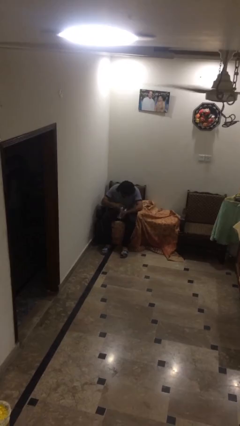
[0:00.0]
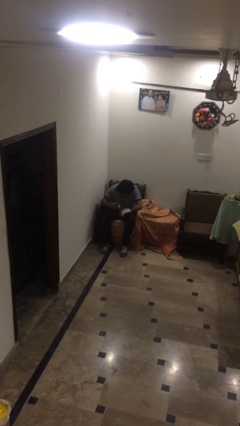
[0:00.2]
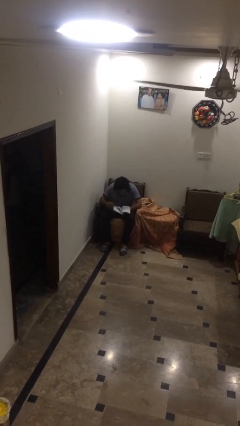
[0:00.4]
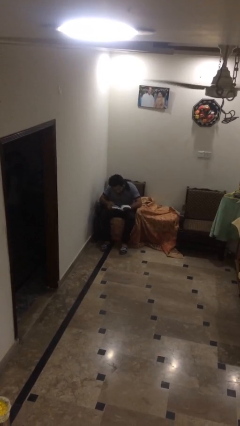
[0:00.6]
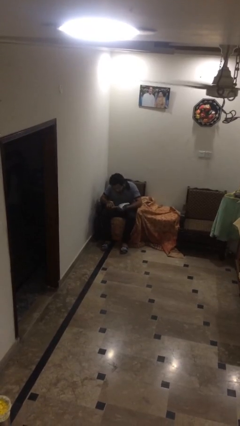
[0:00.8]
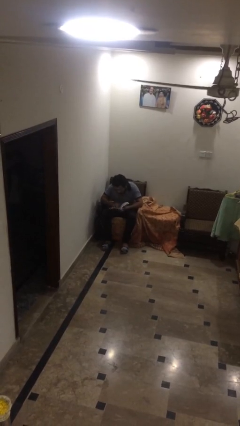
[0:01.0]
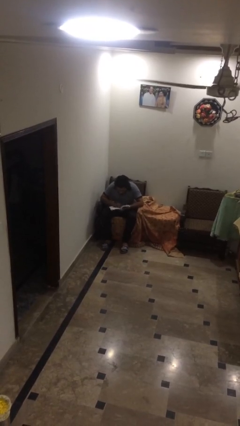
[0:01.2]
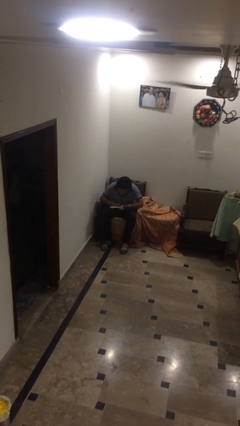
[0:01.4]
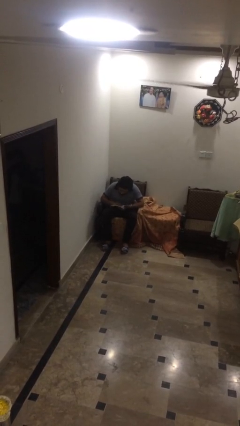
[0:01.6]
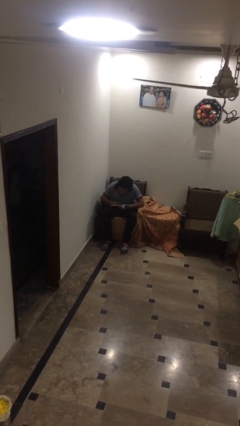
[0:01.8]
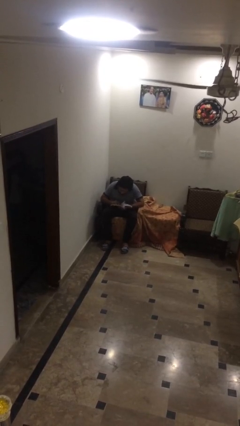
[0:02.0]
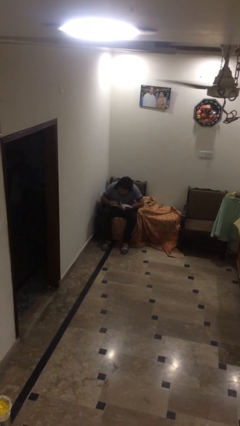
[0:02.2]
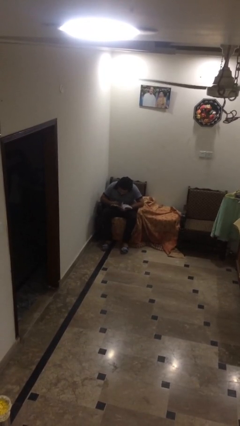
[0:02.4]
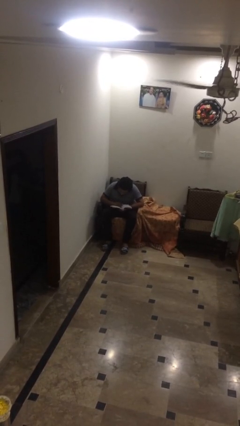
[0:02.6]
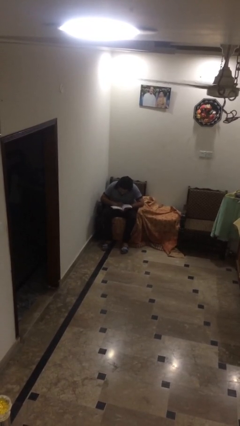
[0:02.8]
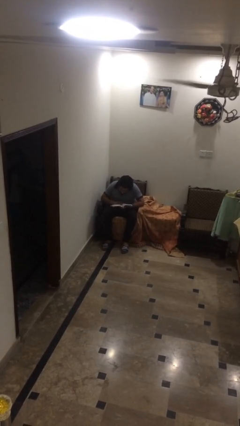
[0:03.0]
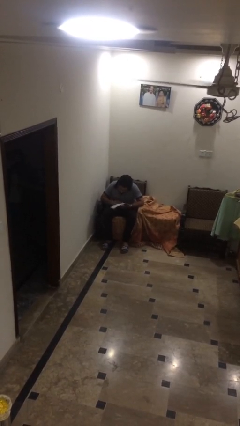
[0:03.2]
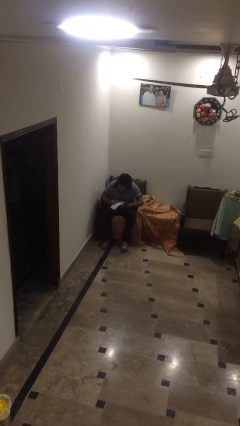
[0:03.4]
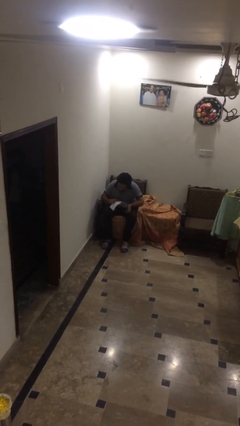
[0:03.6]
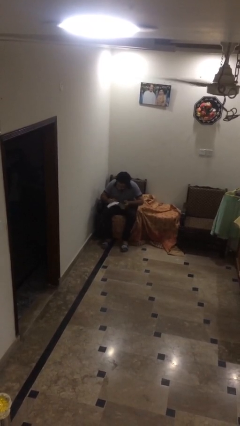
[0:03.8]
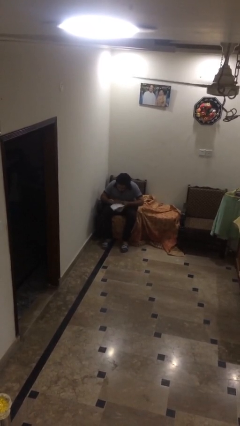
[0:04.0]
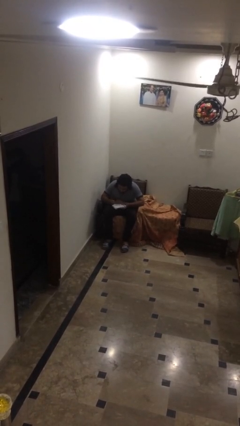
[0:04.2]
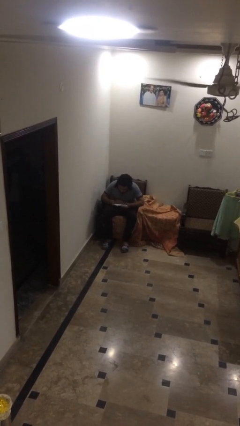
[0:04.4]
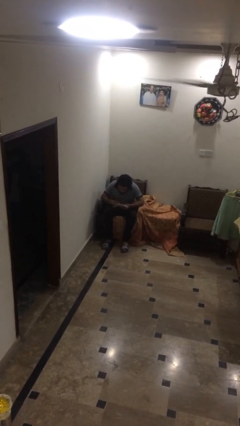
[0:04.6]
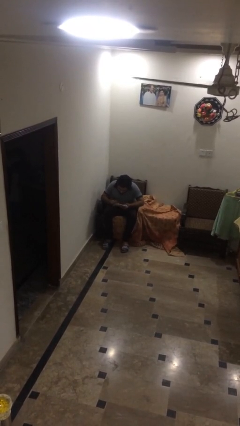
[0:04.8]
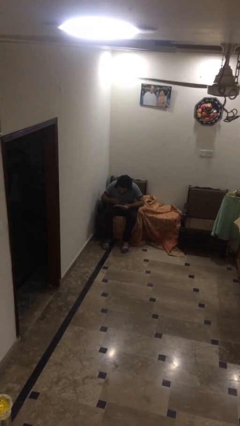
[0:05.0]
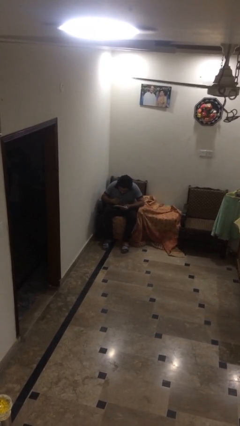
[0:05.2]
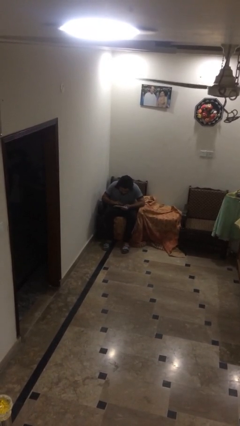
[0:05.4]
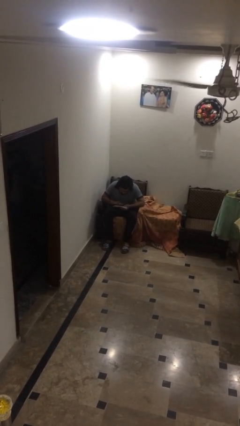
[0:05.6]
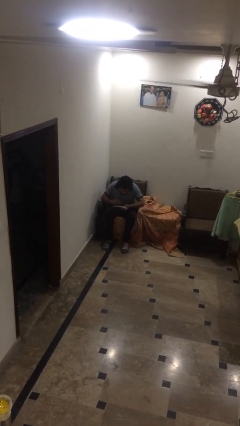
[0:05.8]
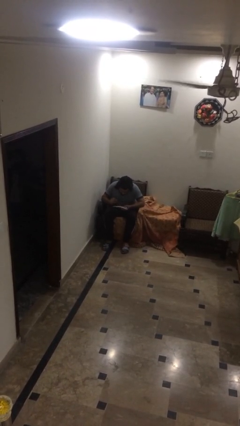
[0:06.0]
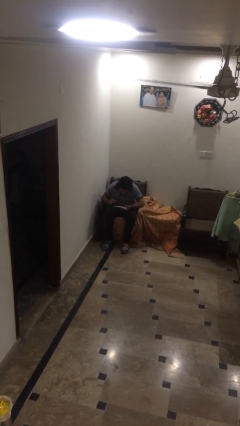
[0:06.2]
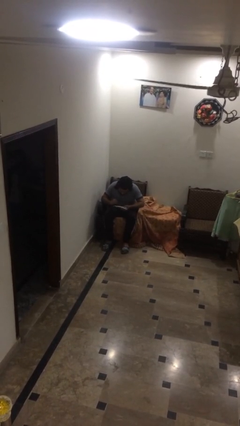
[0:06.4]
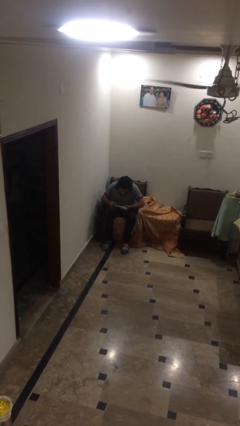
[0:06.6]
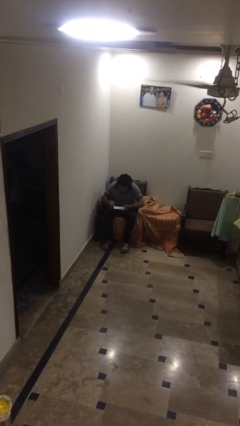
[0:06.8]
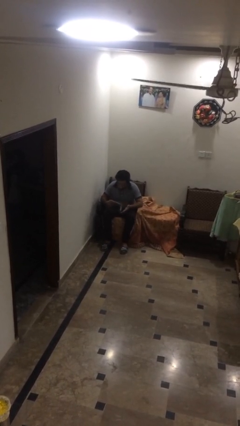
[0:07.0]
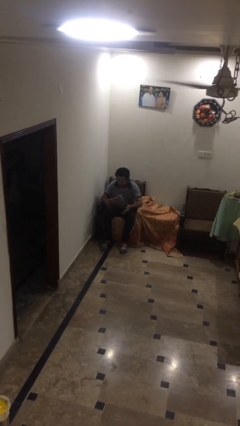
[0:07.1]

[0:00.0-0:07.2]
person reads document

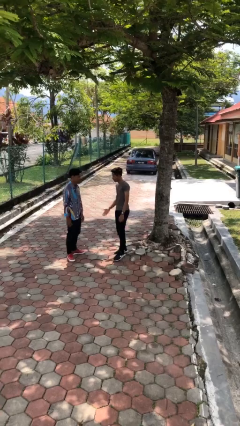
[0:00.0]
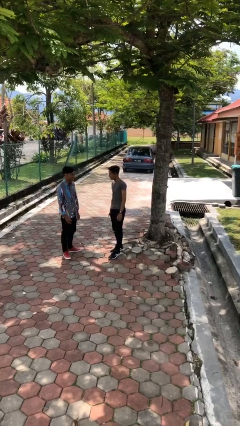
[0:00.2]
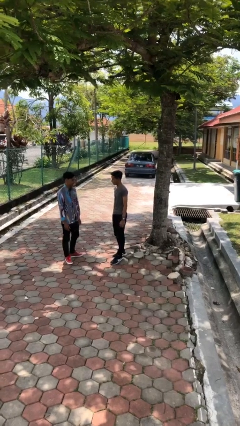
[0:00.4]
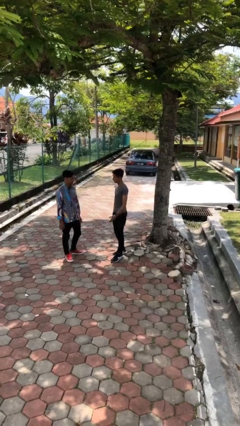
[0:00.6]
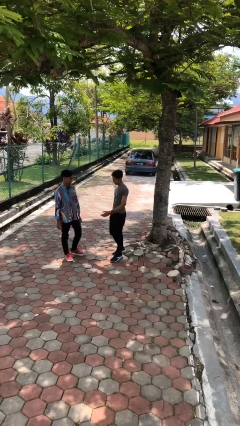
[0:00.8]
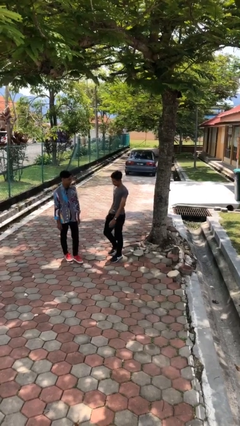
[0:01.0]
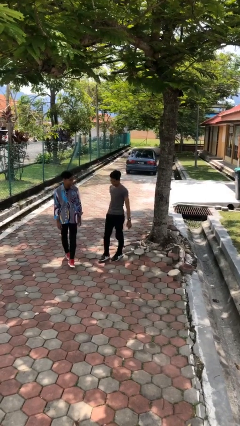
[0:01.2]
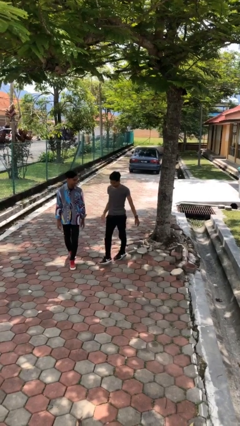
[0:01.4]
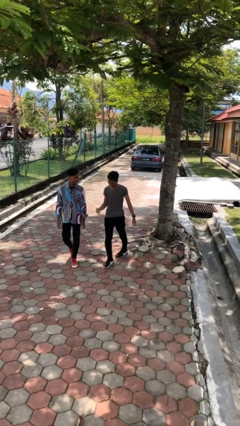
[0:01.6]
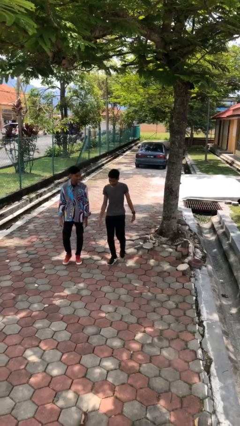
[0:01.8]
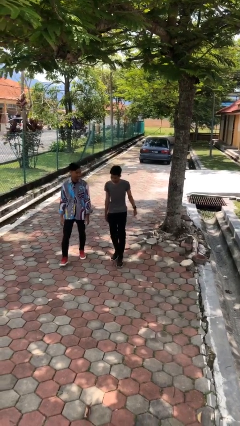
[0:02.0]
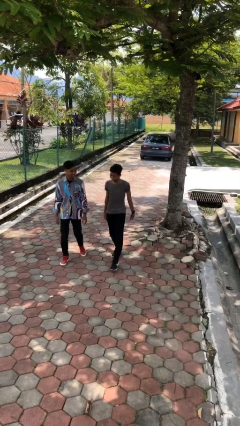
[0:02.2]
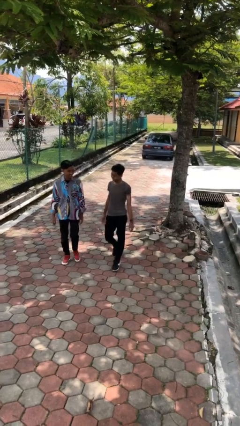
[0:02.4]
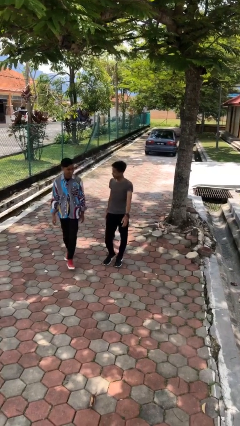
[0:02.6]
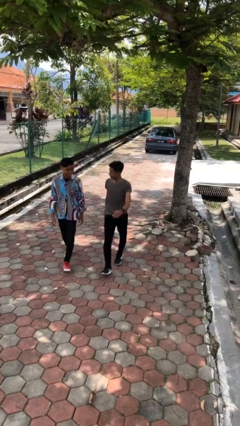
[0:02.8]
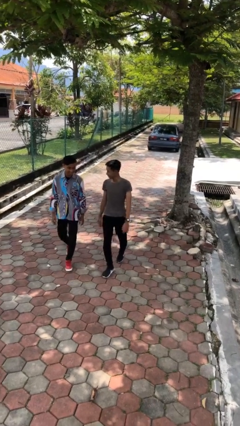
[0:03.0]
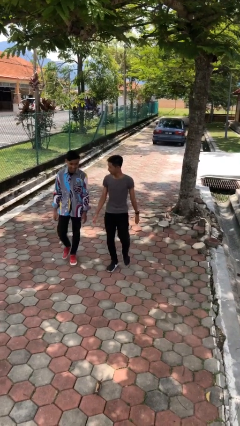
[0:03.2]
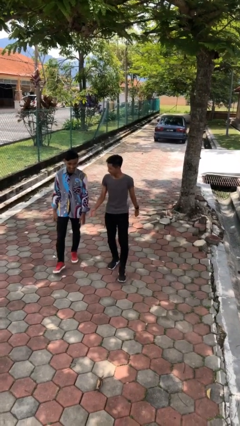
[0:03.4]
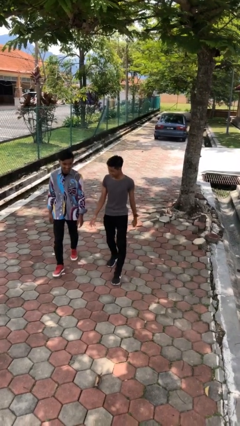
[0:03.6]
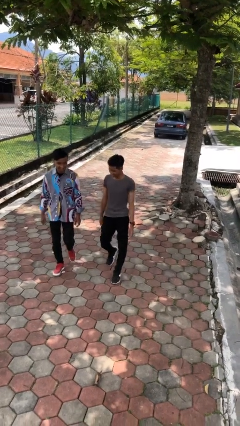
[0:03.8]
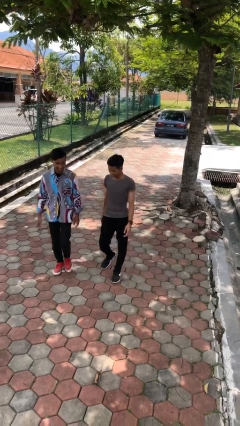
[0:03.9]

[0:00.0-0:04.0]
person talks to person

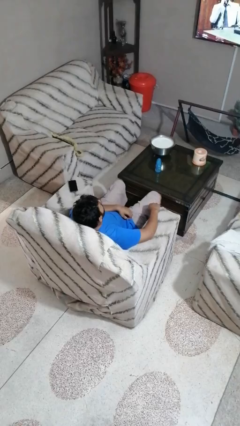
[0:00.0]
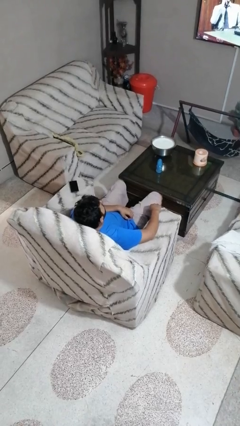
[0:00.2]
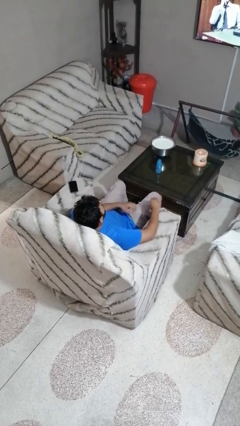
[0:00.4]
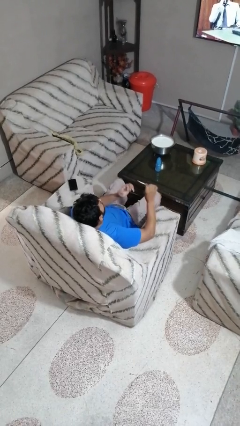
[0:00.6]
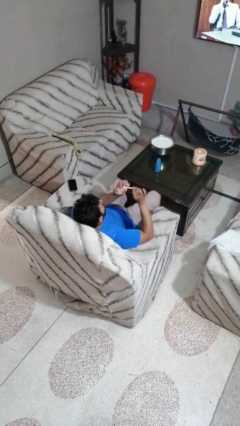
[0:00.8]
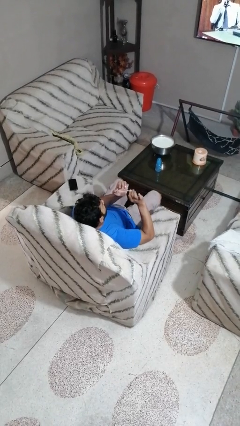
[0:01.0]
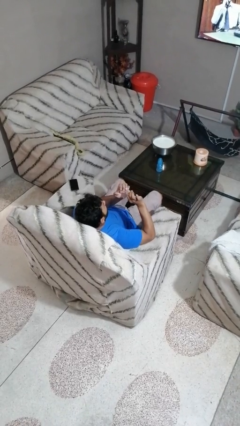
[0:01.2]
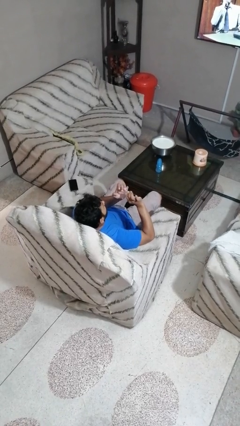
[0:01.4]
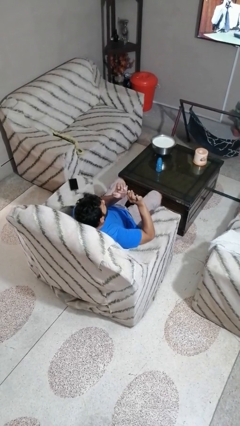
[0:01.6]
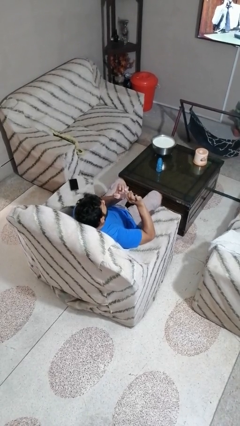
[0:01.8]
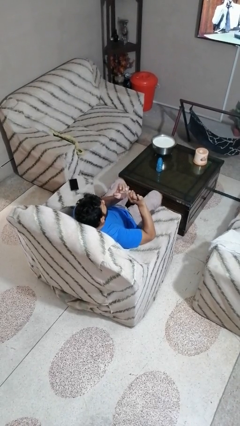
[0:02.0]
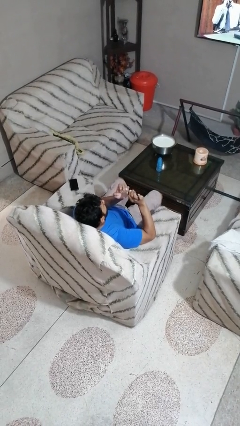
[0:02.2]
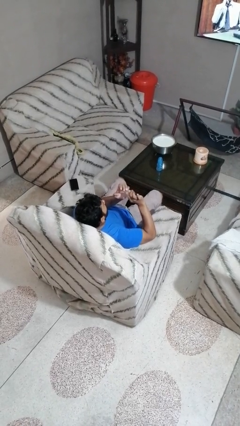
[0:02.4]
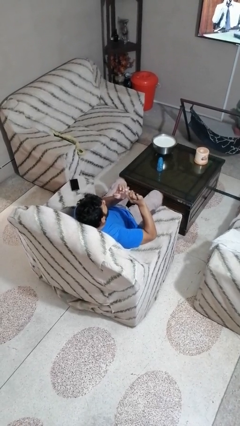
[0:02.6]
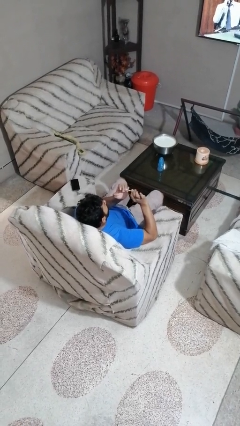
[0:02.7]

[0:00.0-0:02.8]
person files fingernails

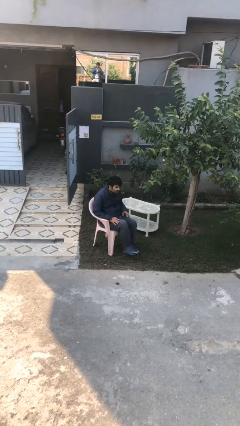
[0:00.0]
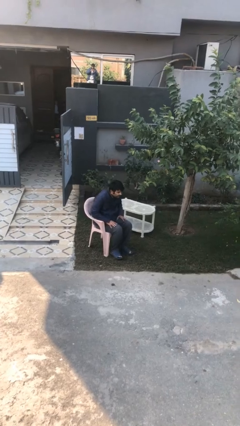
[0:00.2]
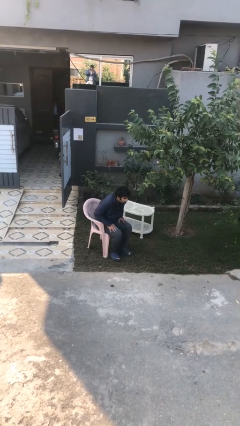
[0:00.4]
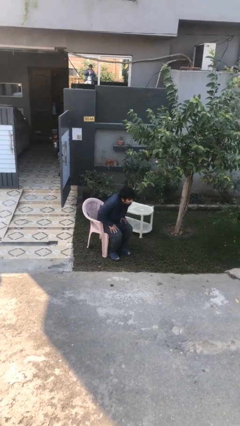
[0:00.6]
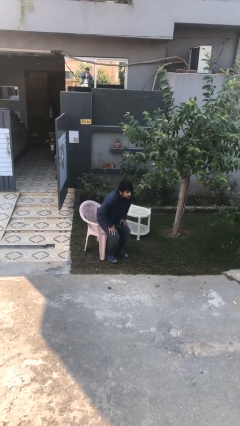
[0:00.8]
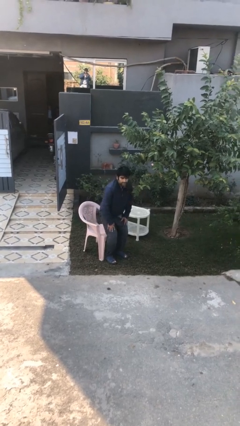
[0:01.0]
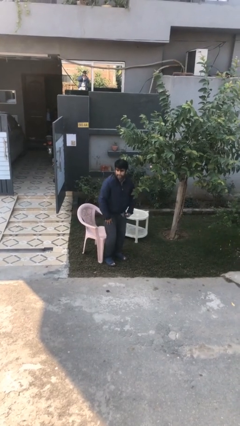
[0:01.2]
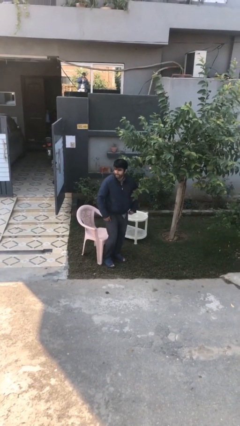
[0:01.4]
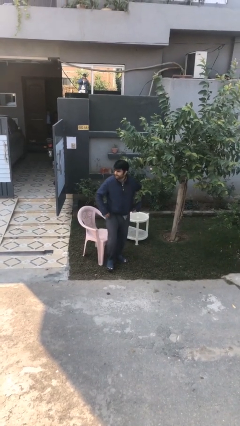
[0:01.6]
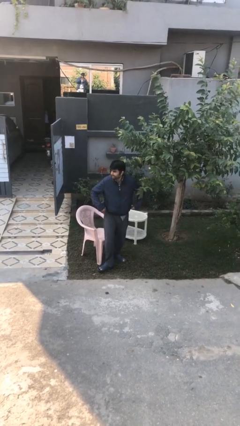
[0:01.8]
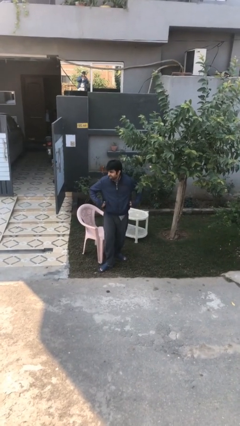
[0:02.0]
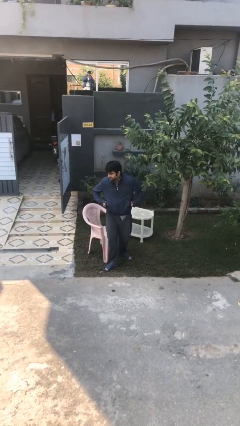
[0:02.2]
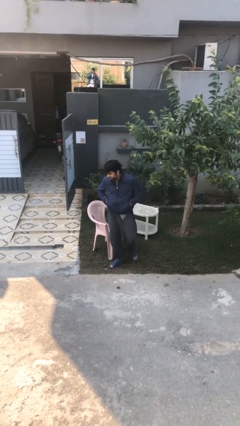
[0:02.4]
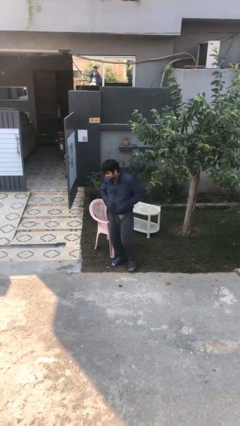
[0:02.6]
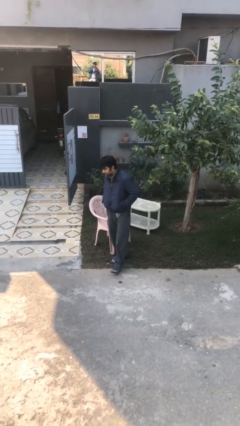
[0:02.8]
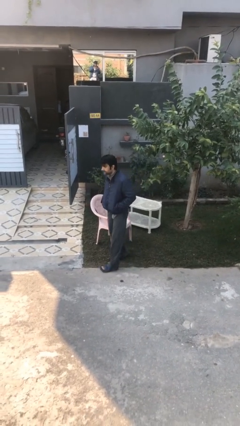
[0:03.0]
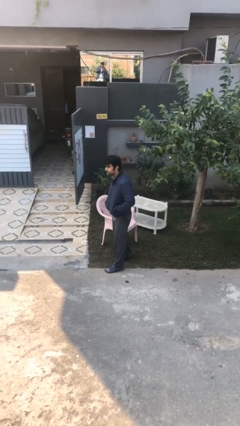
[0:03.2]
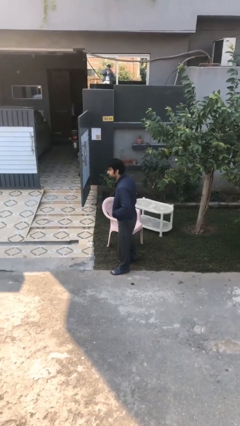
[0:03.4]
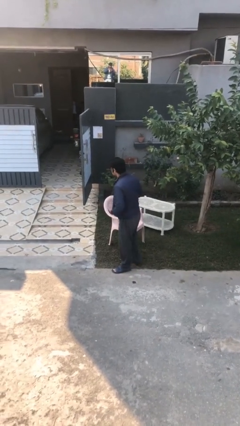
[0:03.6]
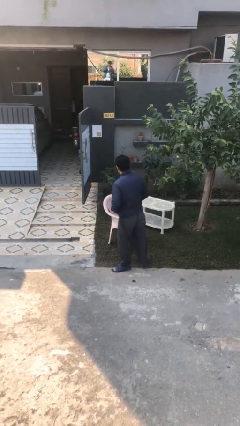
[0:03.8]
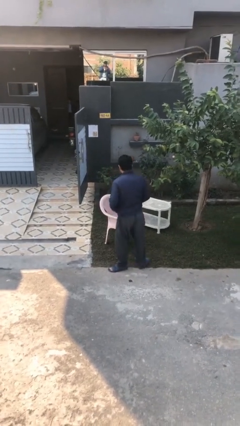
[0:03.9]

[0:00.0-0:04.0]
person stands up
